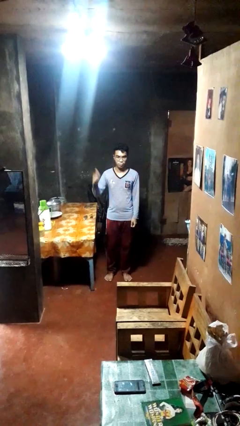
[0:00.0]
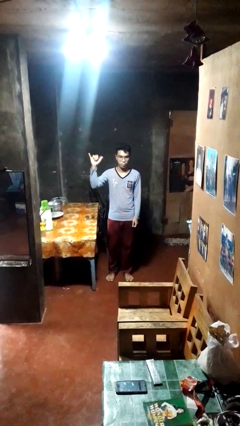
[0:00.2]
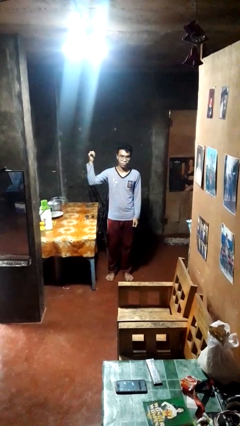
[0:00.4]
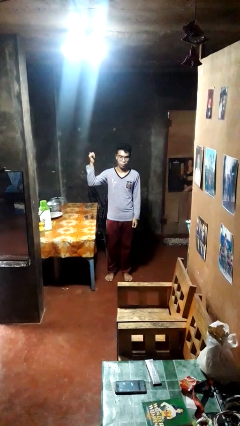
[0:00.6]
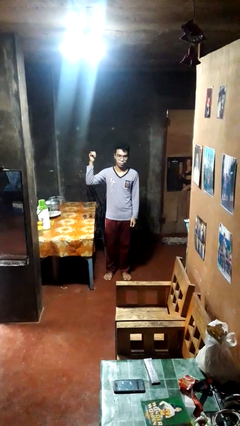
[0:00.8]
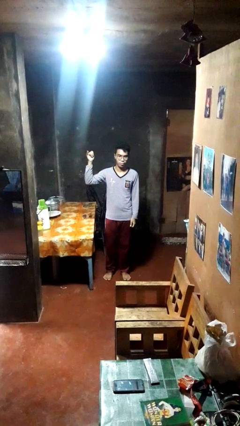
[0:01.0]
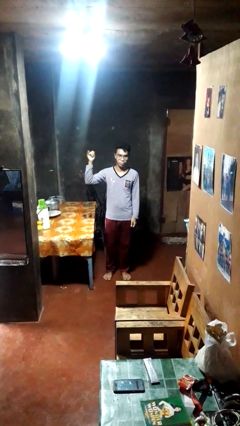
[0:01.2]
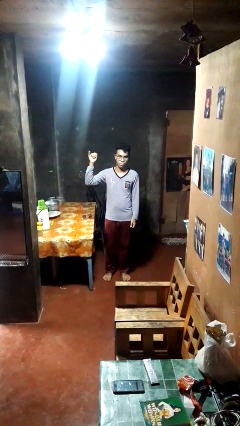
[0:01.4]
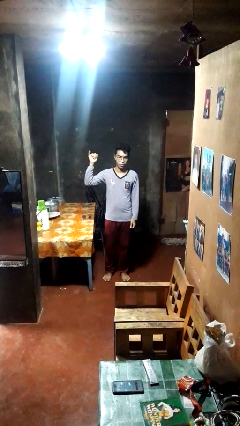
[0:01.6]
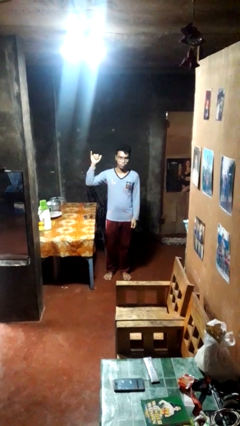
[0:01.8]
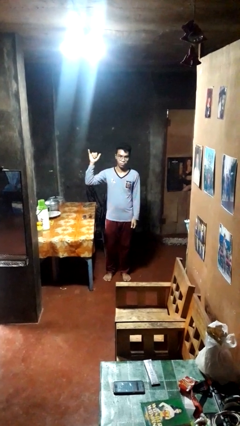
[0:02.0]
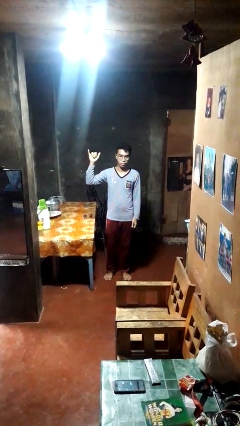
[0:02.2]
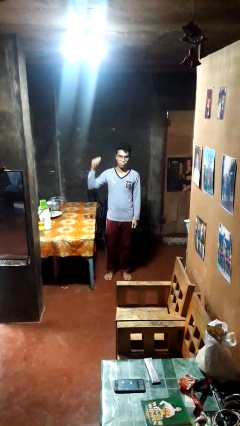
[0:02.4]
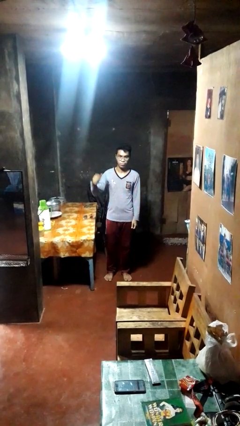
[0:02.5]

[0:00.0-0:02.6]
person gestures hang loose

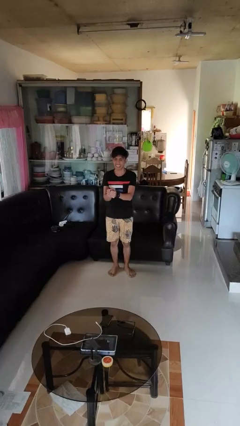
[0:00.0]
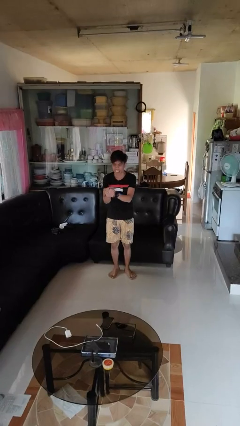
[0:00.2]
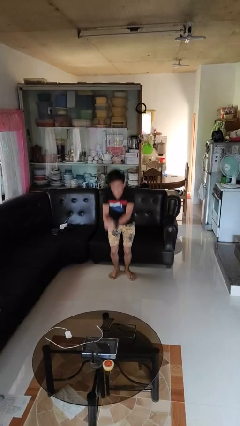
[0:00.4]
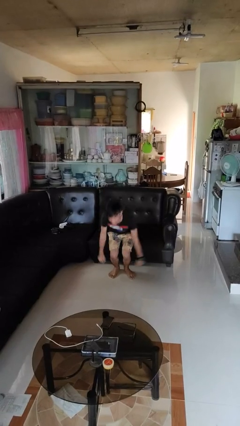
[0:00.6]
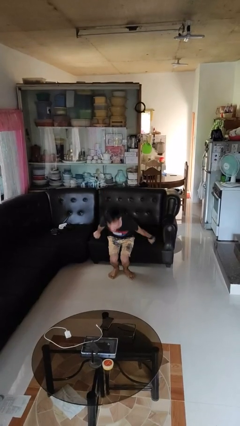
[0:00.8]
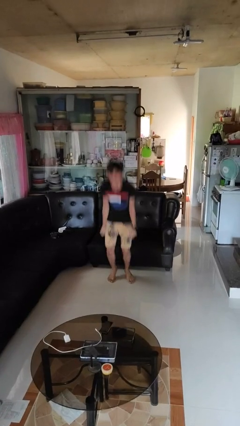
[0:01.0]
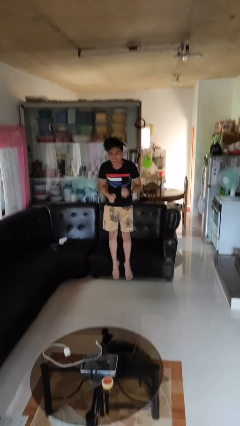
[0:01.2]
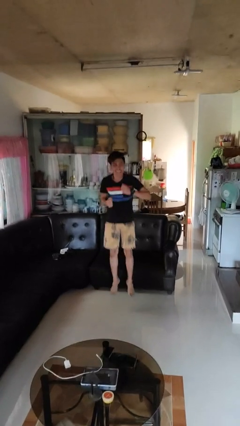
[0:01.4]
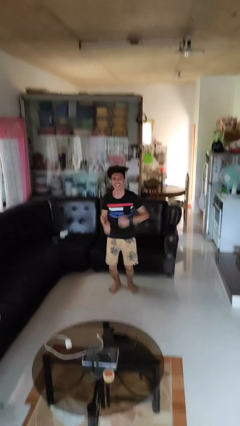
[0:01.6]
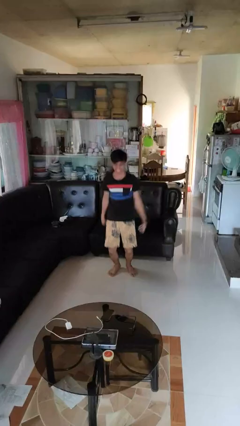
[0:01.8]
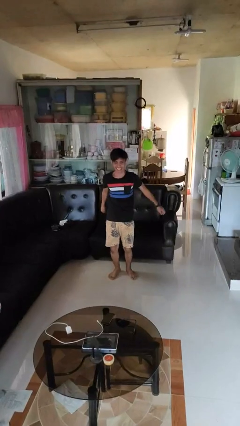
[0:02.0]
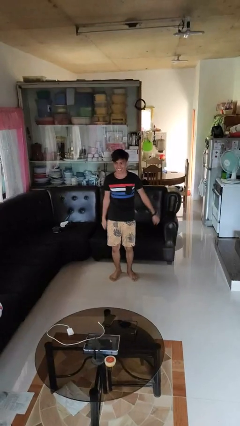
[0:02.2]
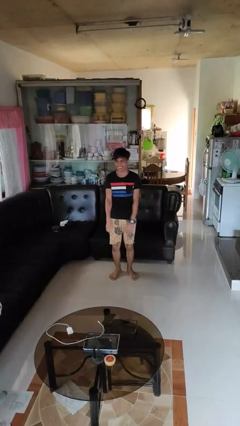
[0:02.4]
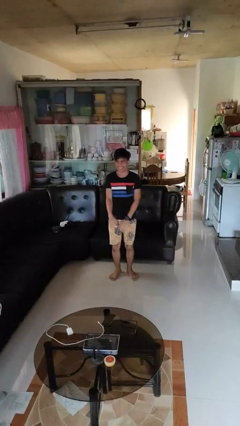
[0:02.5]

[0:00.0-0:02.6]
person jumps

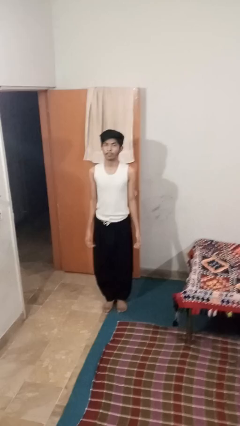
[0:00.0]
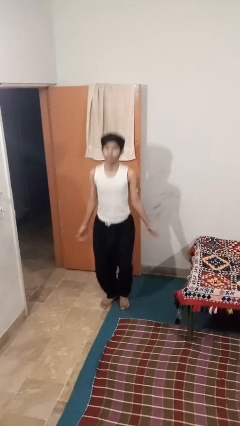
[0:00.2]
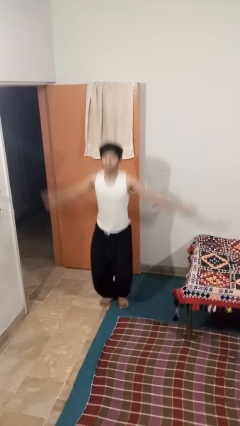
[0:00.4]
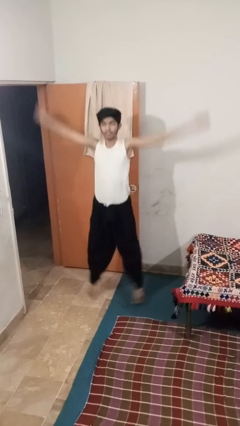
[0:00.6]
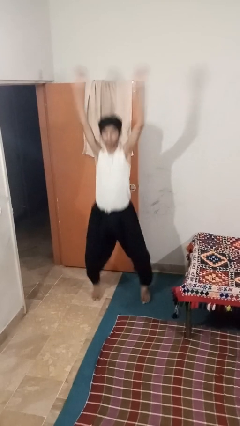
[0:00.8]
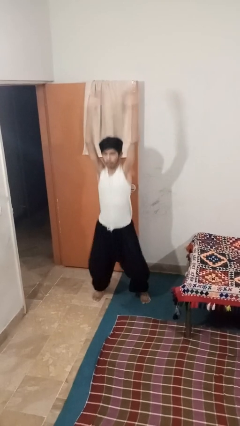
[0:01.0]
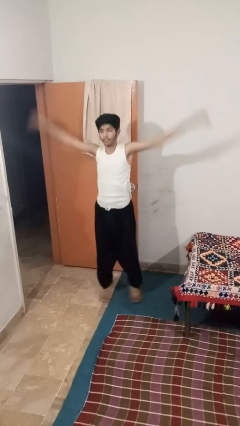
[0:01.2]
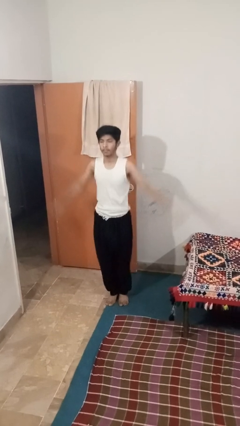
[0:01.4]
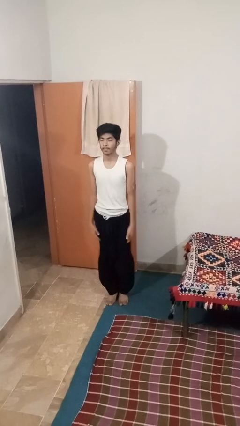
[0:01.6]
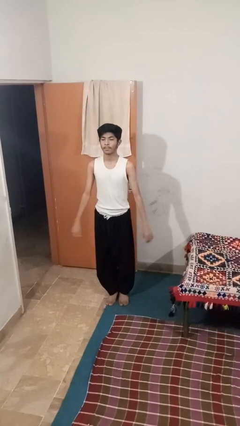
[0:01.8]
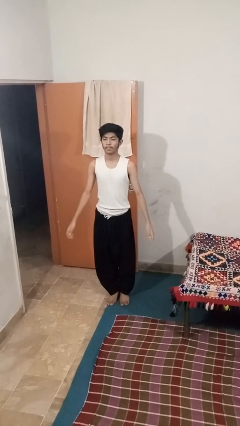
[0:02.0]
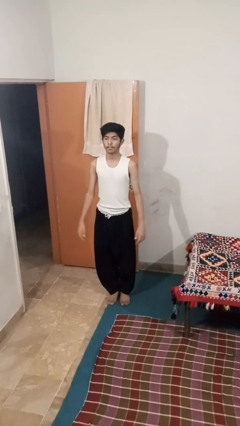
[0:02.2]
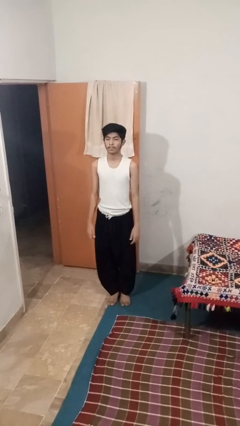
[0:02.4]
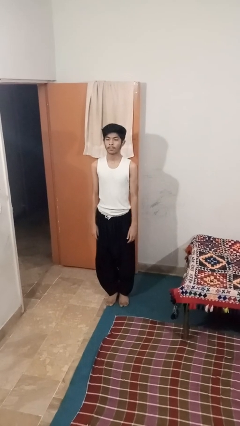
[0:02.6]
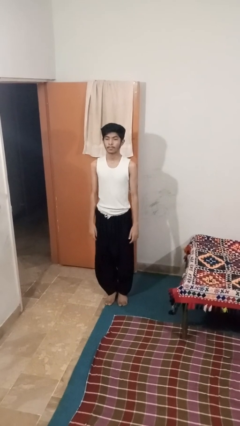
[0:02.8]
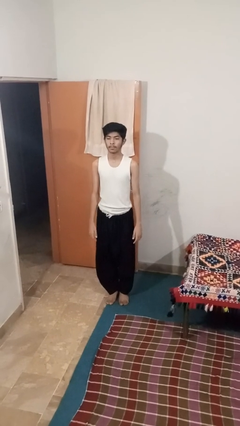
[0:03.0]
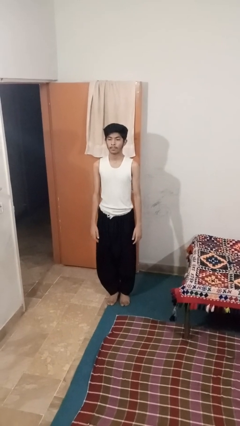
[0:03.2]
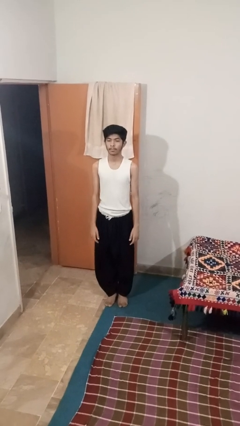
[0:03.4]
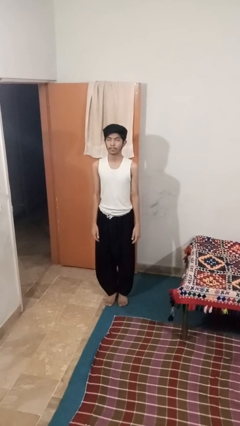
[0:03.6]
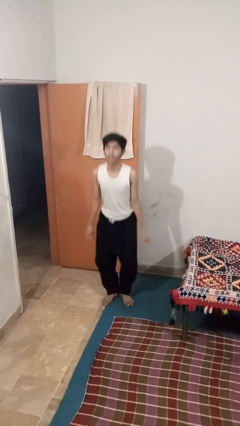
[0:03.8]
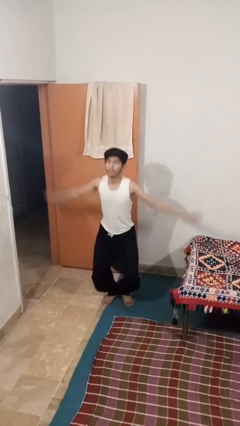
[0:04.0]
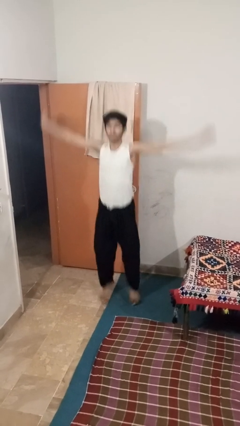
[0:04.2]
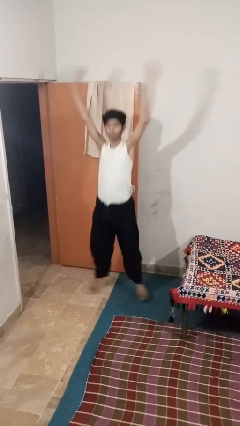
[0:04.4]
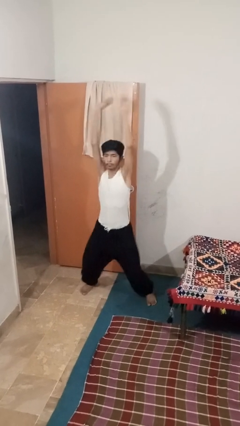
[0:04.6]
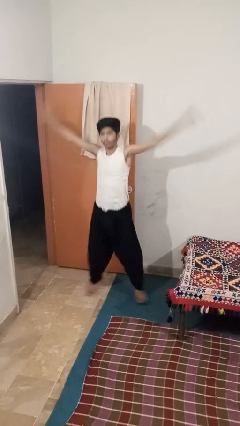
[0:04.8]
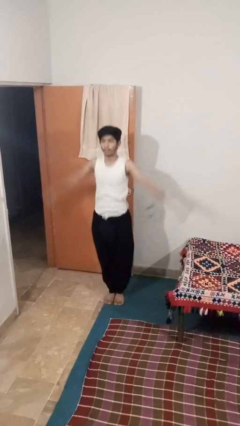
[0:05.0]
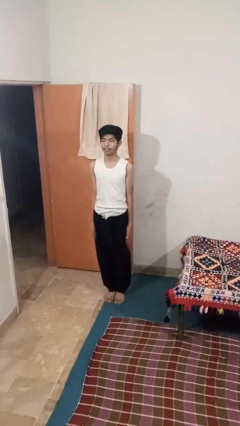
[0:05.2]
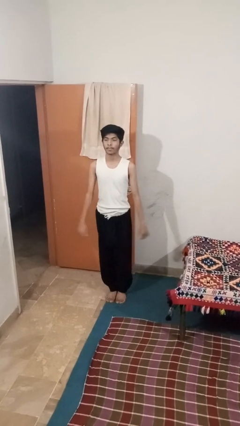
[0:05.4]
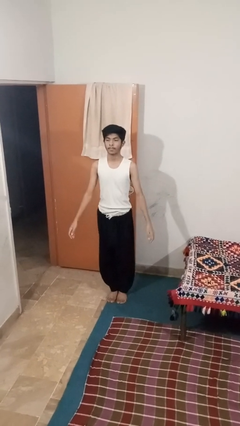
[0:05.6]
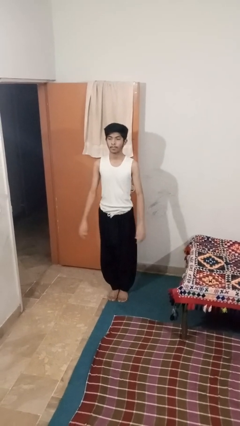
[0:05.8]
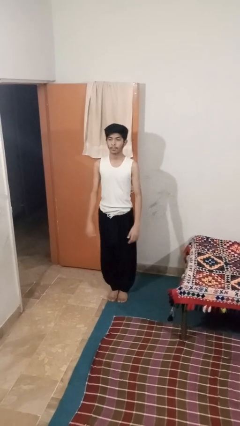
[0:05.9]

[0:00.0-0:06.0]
person exercises with jumping jacks

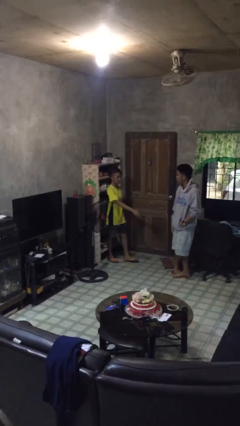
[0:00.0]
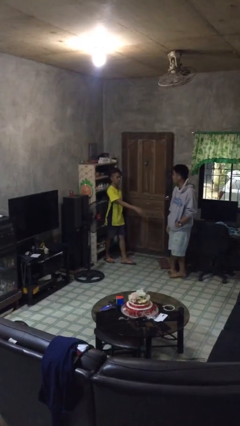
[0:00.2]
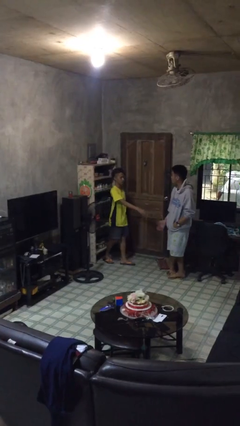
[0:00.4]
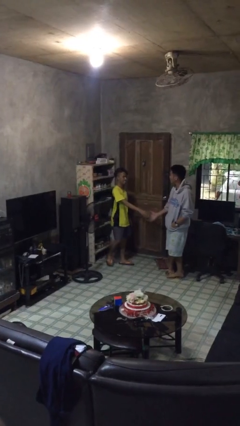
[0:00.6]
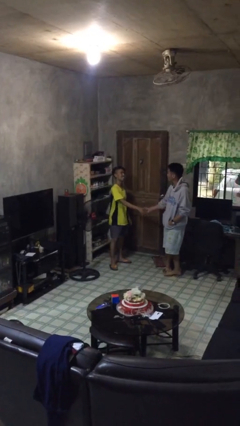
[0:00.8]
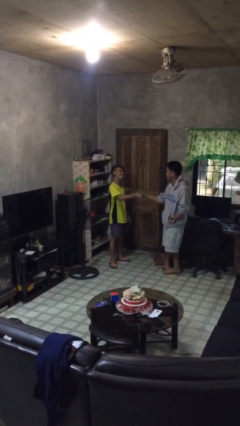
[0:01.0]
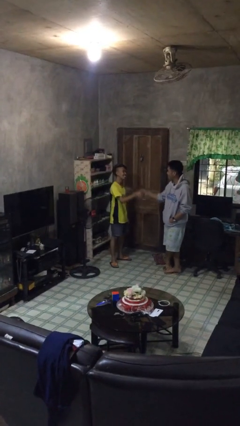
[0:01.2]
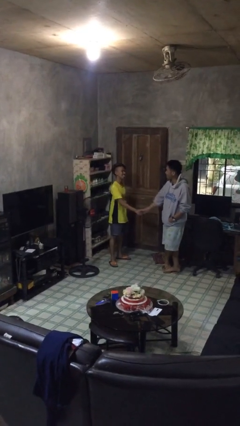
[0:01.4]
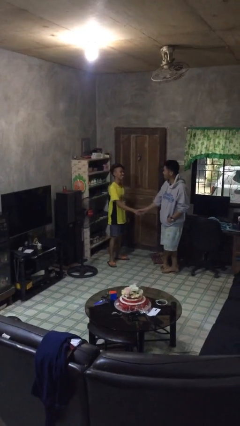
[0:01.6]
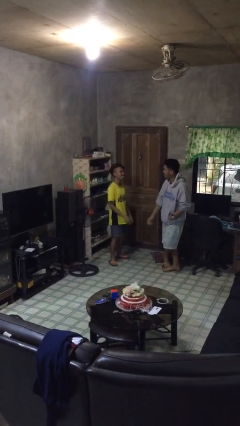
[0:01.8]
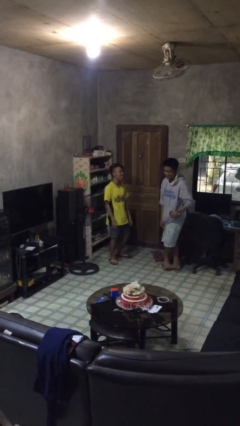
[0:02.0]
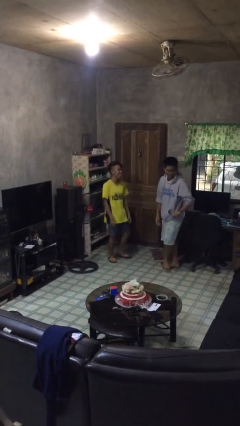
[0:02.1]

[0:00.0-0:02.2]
person shakes hand

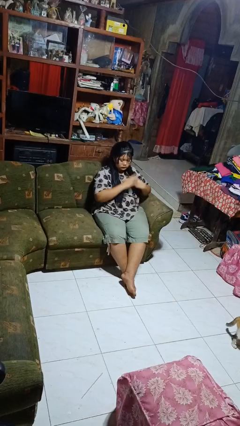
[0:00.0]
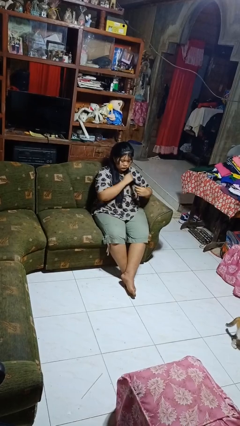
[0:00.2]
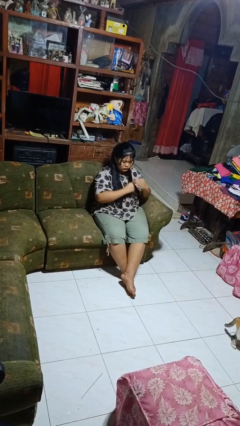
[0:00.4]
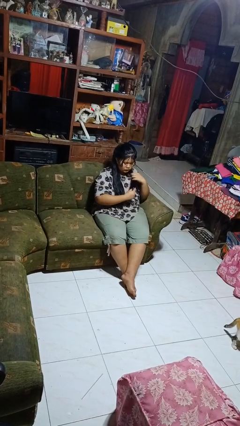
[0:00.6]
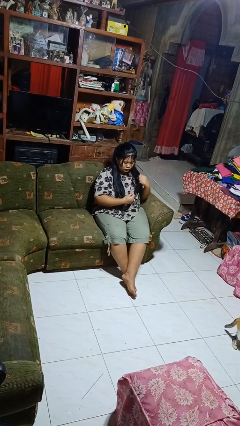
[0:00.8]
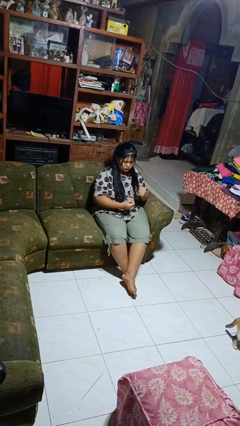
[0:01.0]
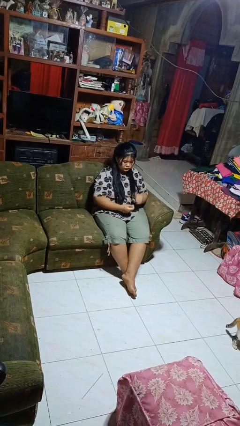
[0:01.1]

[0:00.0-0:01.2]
person strokes hair

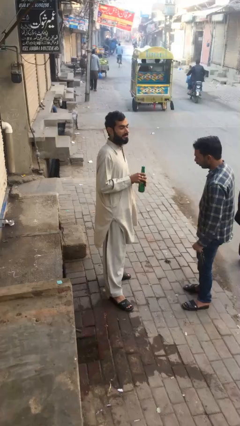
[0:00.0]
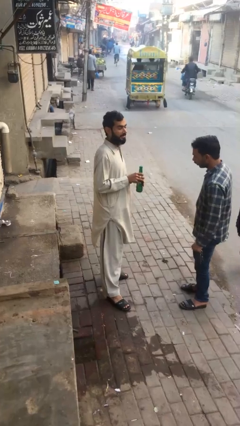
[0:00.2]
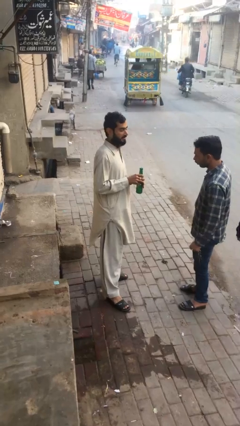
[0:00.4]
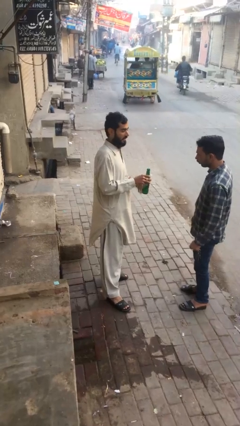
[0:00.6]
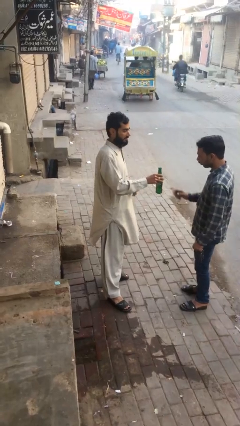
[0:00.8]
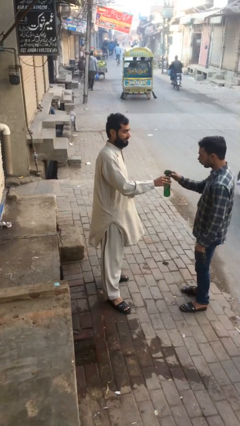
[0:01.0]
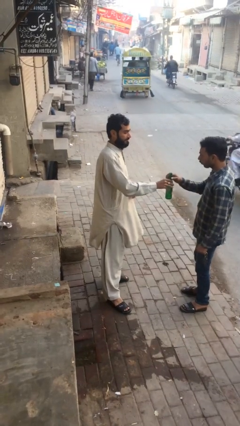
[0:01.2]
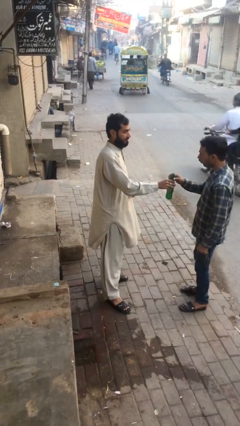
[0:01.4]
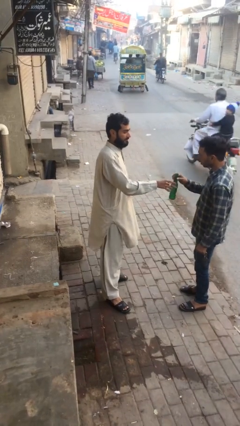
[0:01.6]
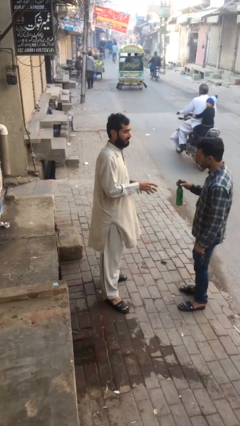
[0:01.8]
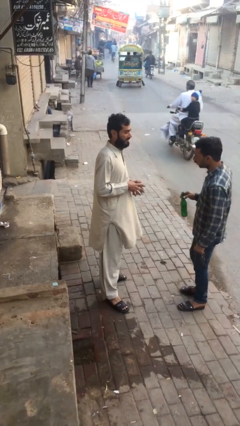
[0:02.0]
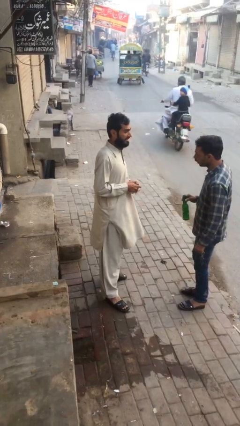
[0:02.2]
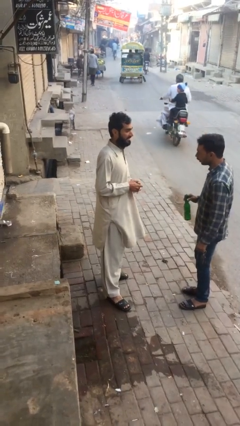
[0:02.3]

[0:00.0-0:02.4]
person transfers object to person

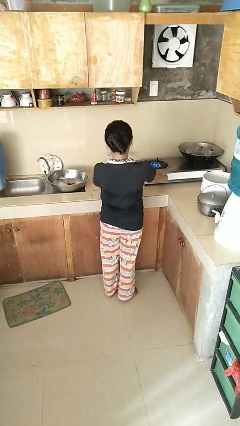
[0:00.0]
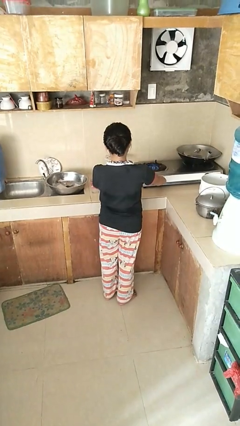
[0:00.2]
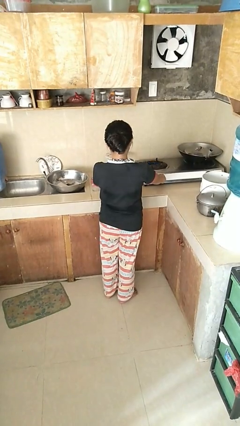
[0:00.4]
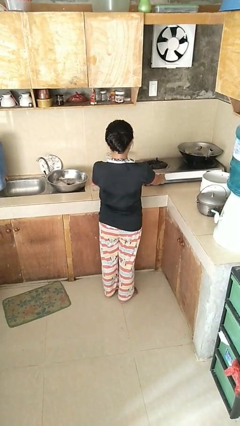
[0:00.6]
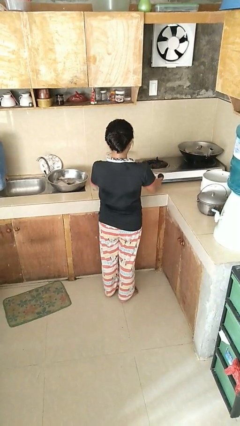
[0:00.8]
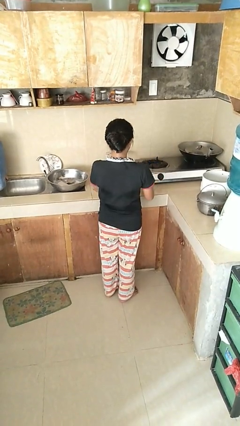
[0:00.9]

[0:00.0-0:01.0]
person turns off stovetop
